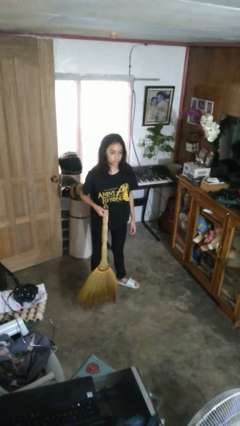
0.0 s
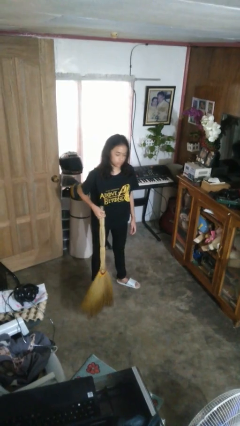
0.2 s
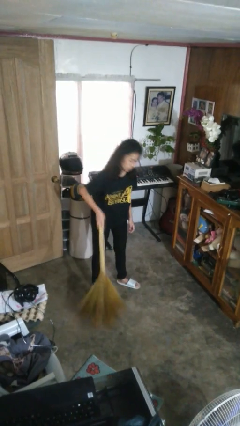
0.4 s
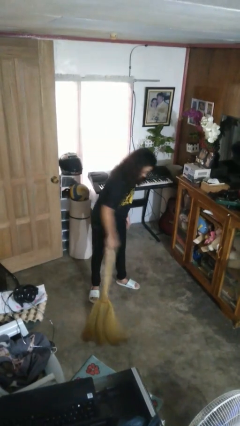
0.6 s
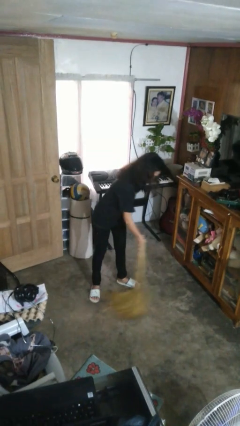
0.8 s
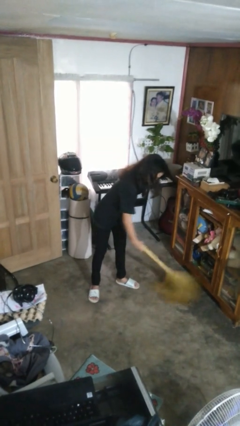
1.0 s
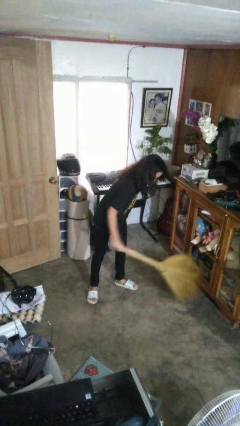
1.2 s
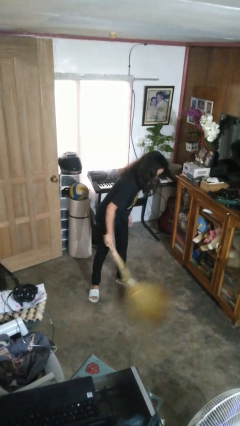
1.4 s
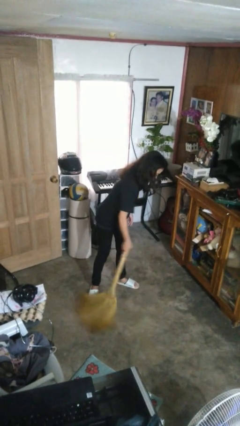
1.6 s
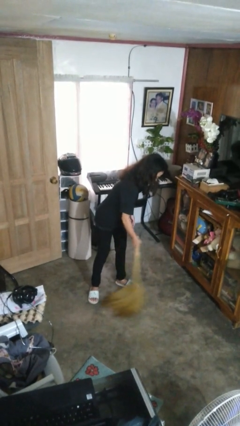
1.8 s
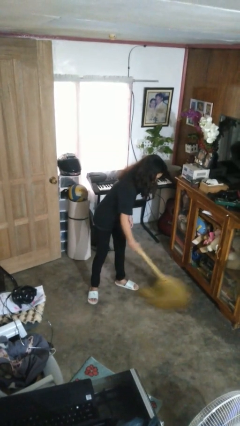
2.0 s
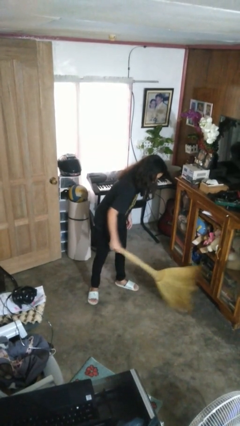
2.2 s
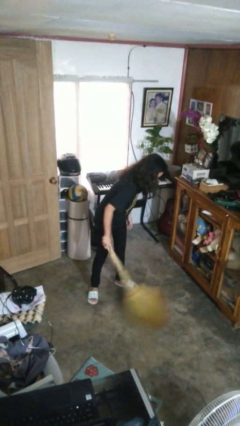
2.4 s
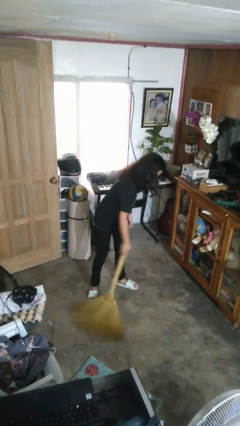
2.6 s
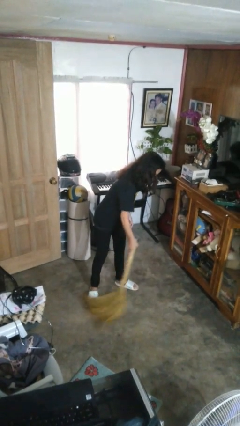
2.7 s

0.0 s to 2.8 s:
person sweeps floor

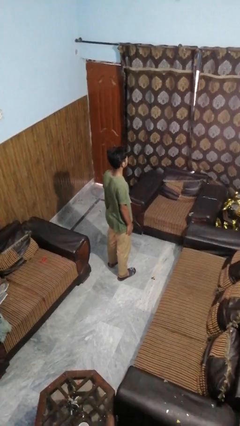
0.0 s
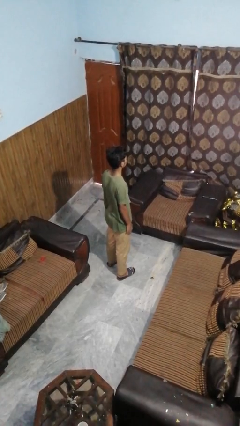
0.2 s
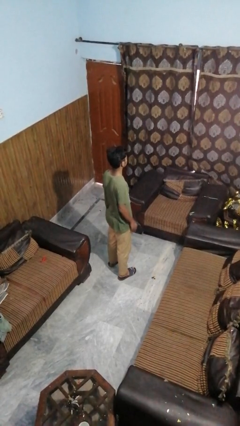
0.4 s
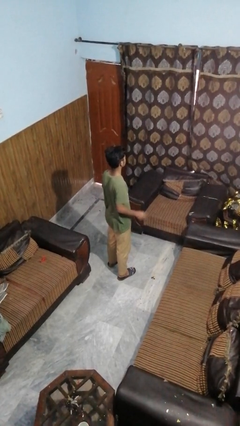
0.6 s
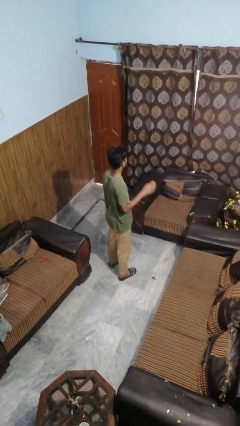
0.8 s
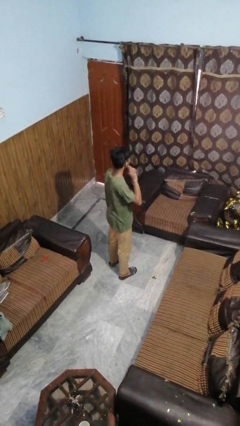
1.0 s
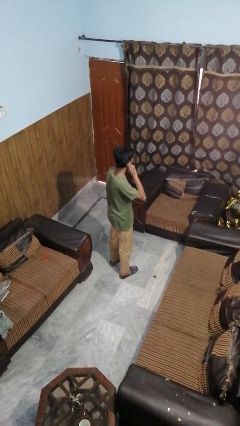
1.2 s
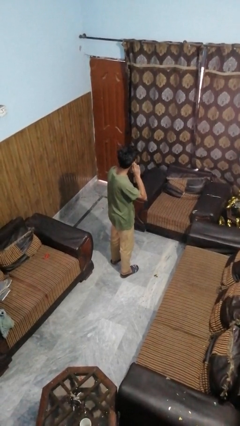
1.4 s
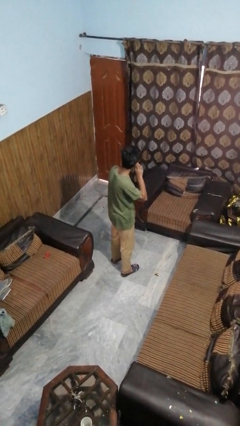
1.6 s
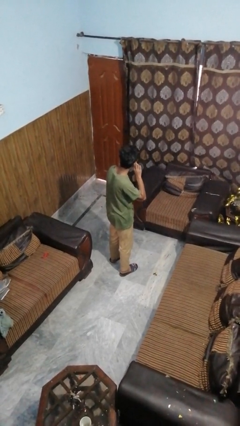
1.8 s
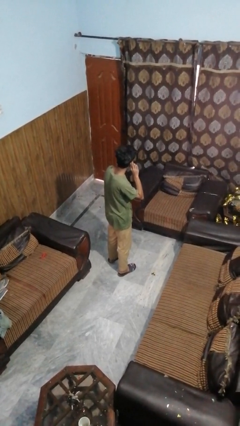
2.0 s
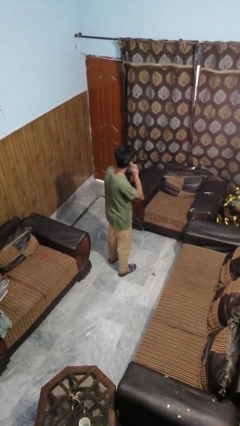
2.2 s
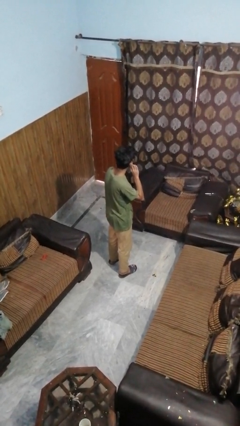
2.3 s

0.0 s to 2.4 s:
person gestures listen closely

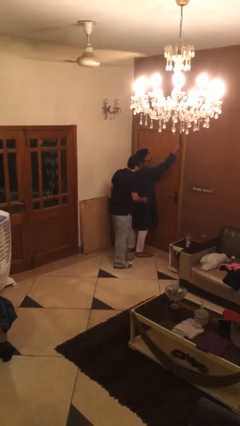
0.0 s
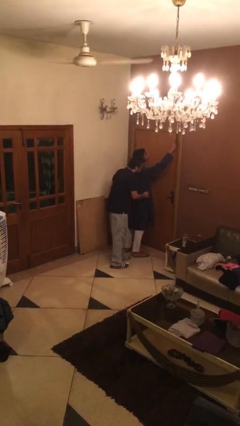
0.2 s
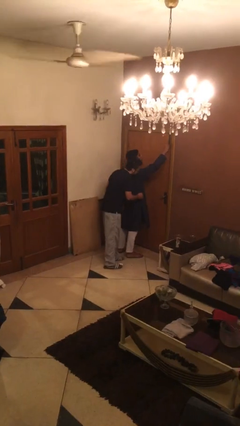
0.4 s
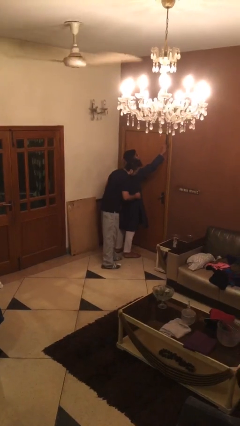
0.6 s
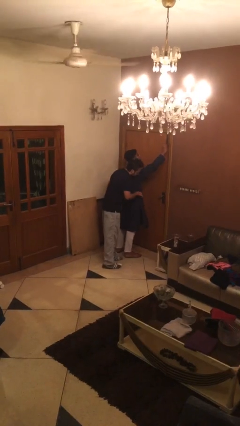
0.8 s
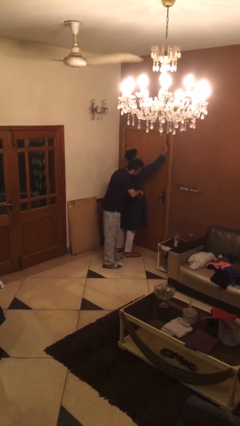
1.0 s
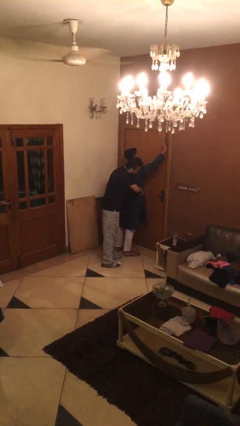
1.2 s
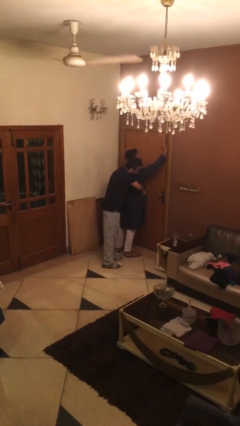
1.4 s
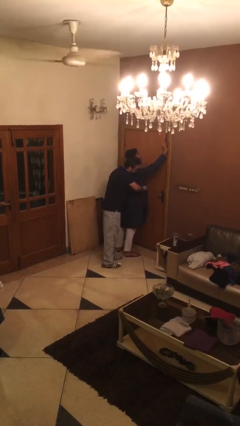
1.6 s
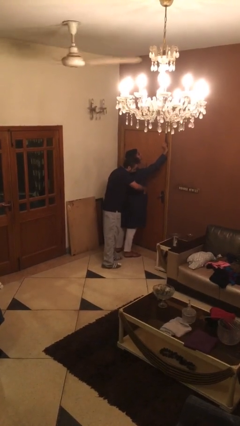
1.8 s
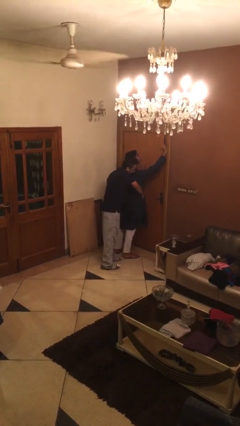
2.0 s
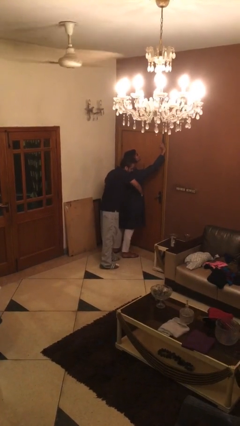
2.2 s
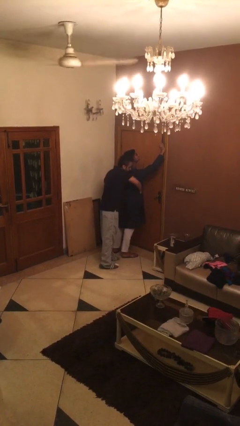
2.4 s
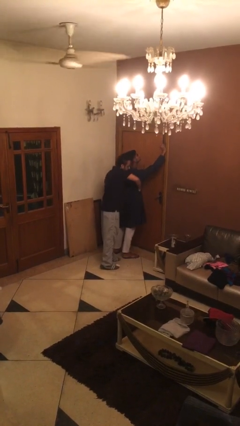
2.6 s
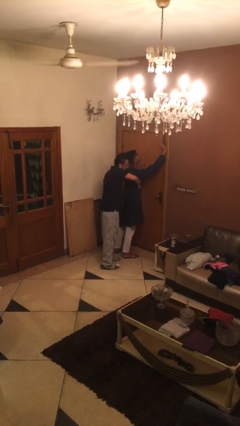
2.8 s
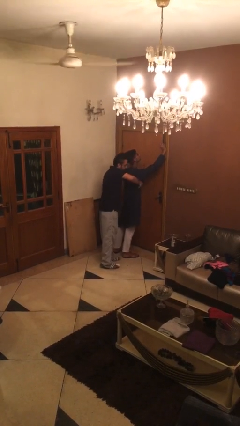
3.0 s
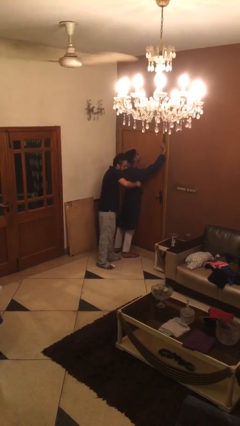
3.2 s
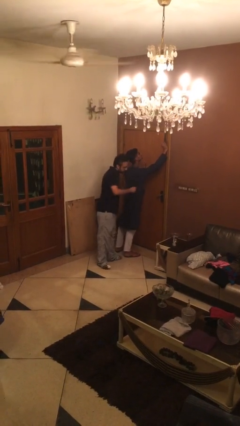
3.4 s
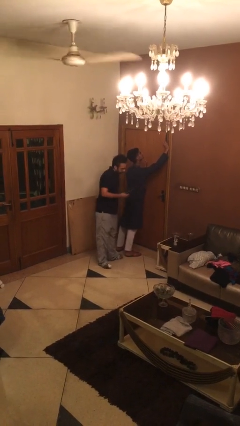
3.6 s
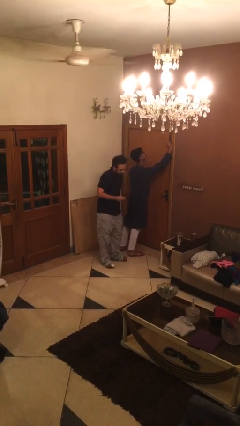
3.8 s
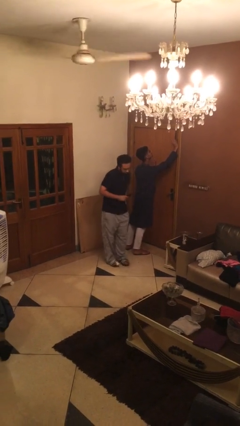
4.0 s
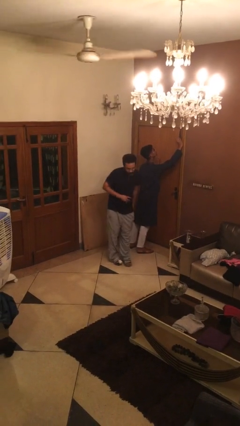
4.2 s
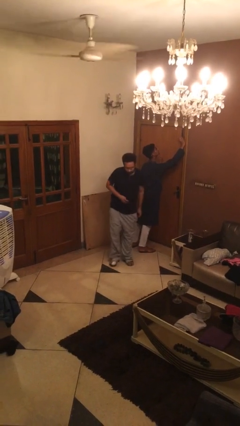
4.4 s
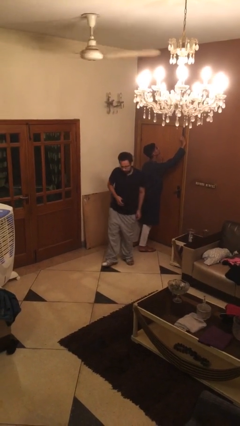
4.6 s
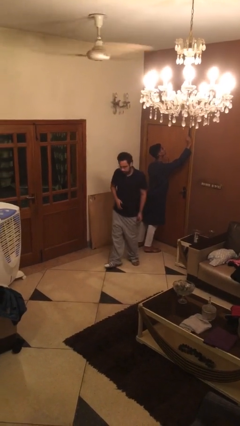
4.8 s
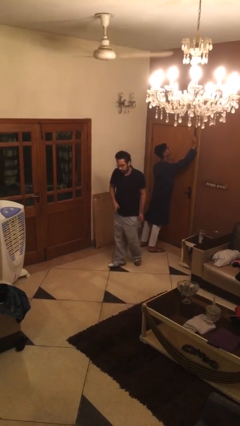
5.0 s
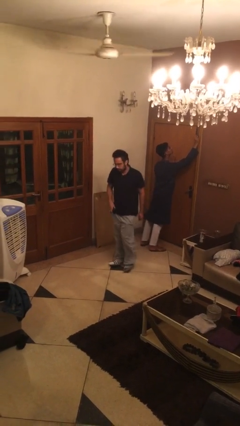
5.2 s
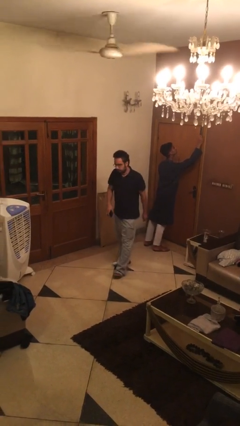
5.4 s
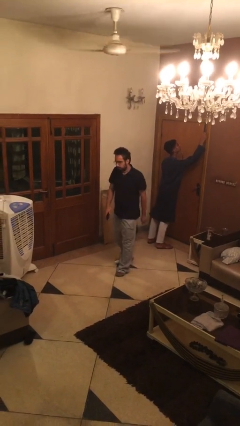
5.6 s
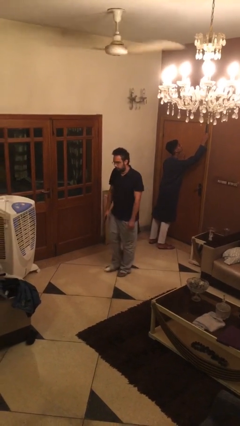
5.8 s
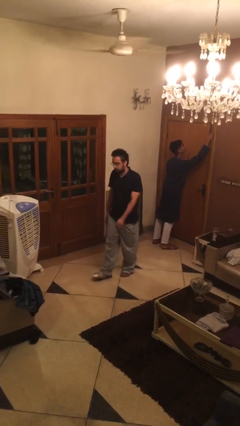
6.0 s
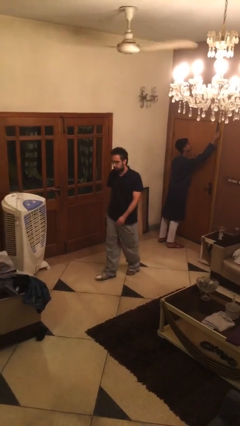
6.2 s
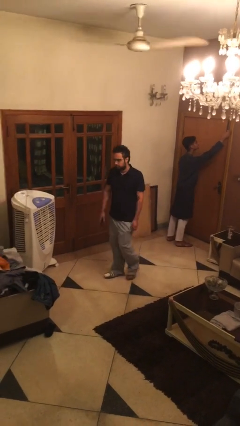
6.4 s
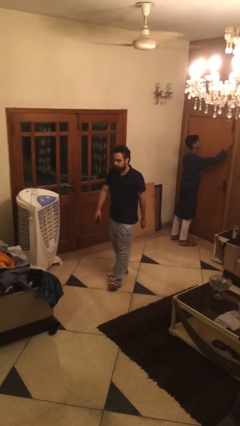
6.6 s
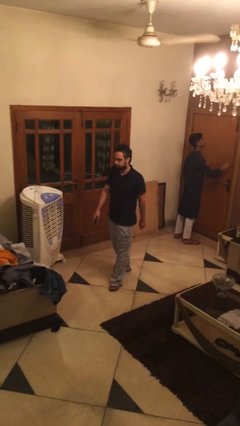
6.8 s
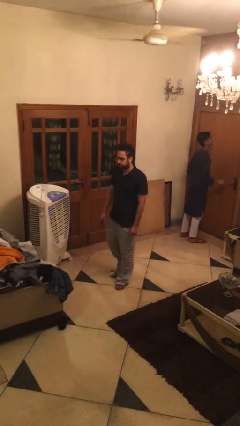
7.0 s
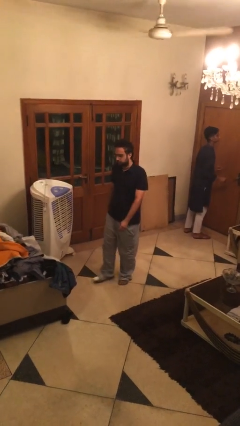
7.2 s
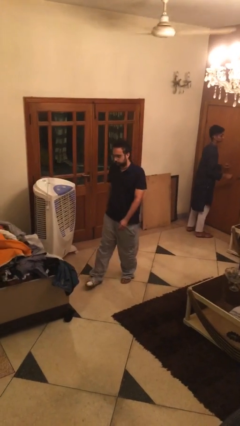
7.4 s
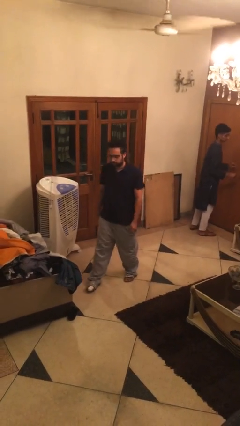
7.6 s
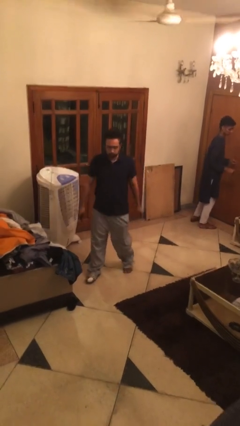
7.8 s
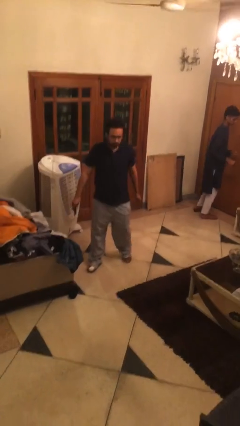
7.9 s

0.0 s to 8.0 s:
person steals object from person

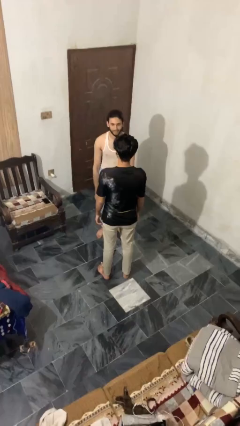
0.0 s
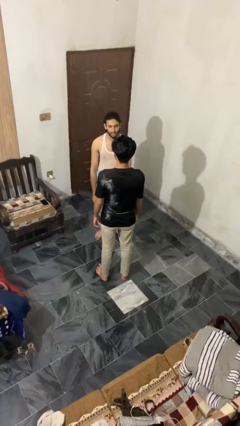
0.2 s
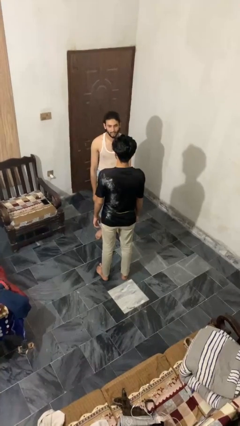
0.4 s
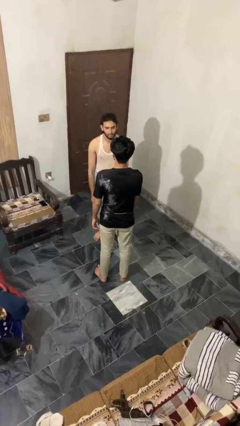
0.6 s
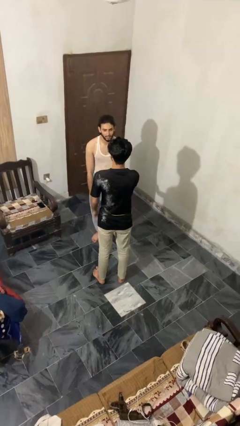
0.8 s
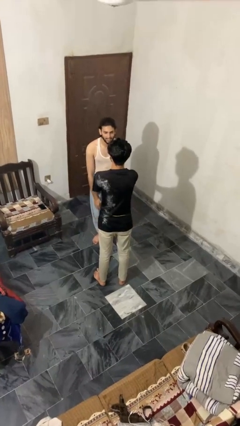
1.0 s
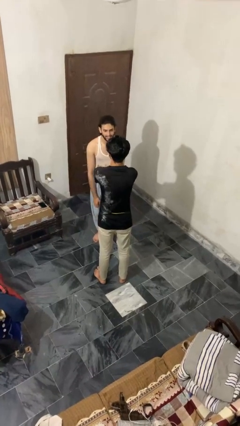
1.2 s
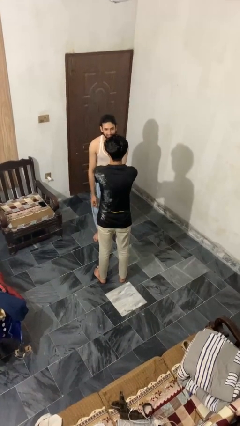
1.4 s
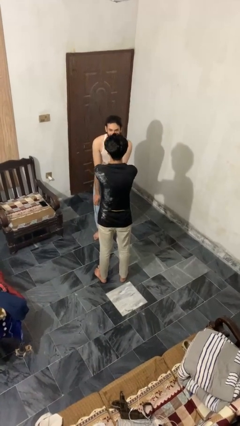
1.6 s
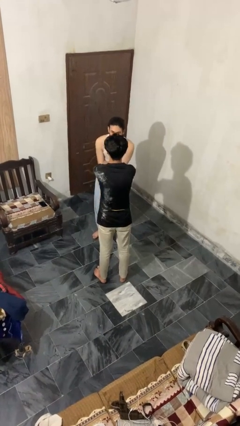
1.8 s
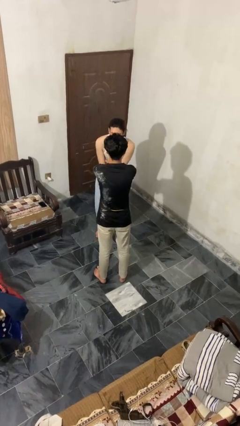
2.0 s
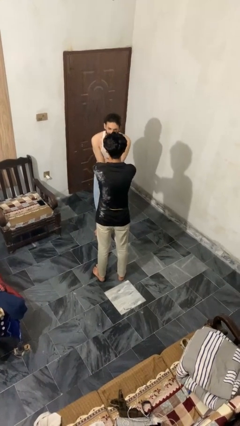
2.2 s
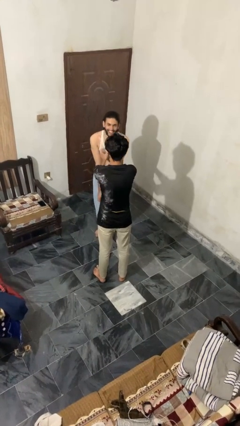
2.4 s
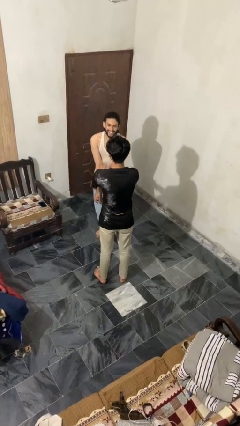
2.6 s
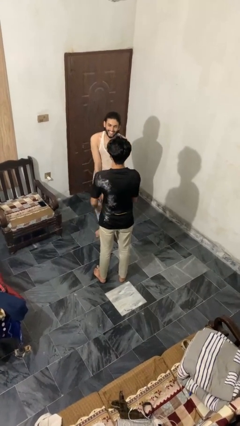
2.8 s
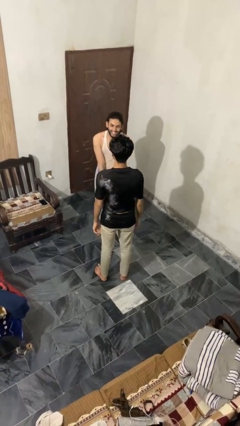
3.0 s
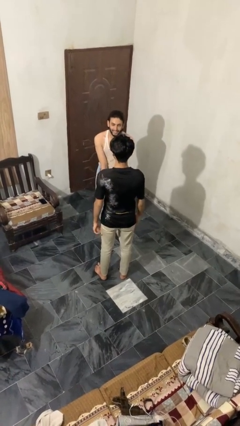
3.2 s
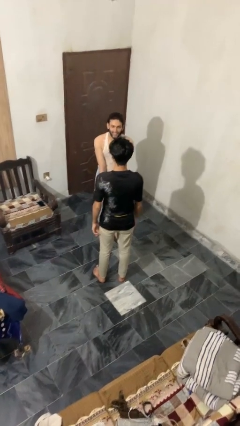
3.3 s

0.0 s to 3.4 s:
person tickles person

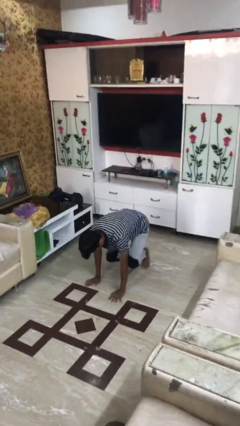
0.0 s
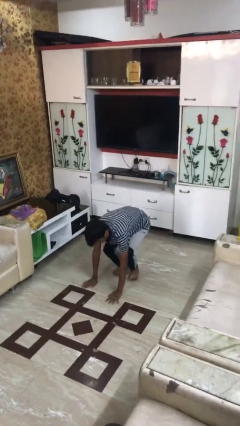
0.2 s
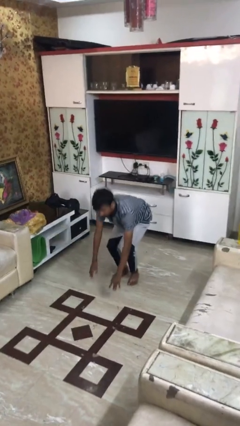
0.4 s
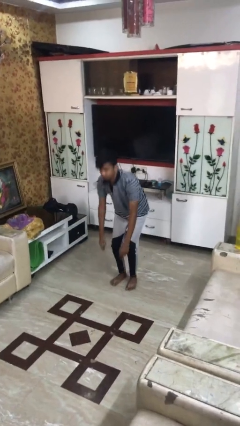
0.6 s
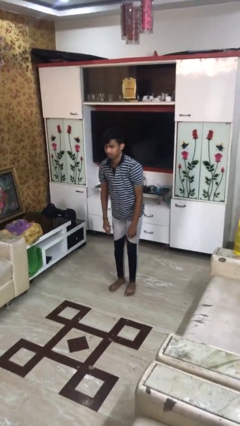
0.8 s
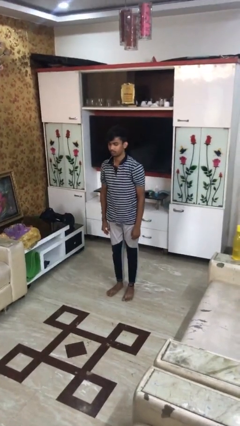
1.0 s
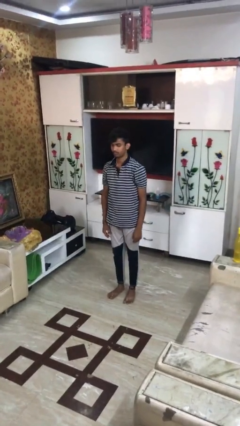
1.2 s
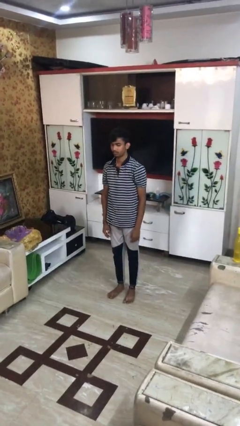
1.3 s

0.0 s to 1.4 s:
person stands up from floor
